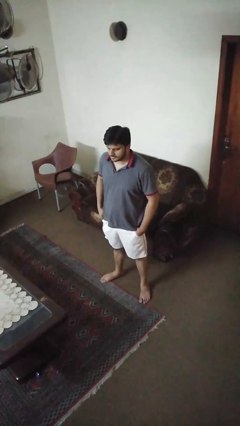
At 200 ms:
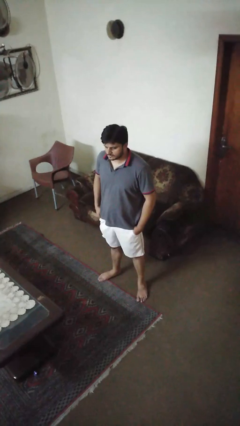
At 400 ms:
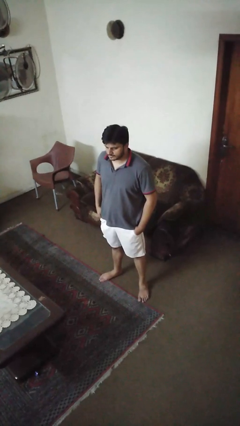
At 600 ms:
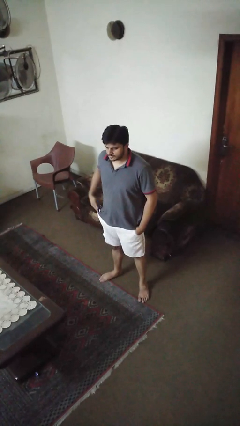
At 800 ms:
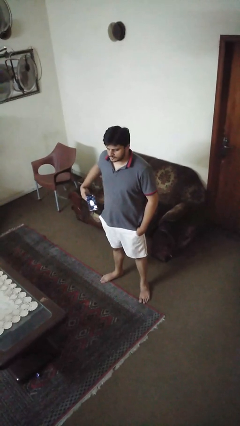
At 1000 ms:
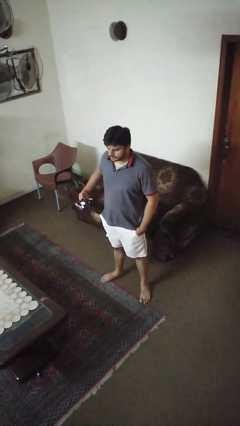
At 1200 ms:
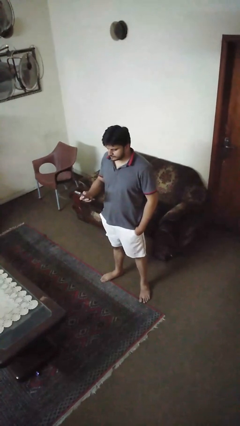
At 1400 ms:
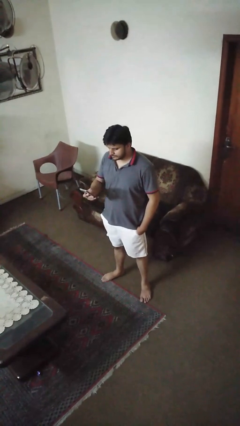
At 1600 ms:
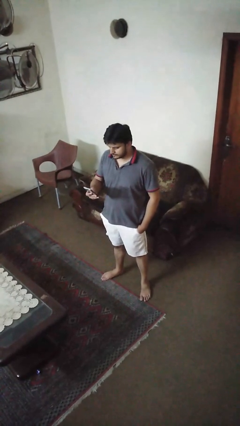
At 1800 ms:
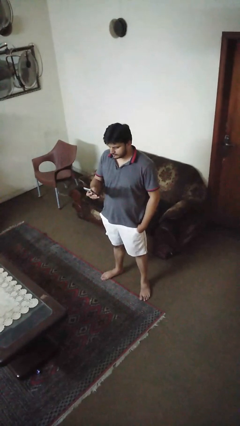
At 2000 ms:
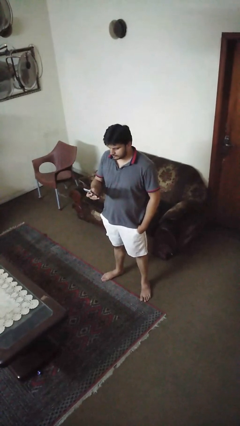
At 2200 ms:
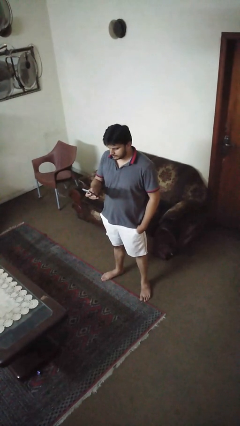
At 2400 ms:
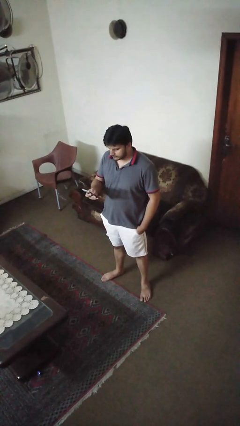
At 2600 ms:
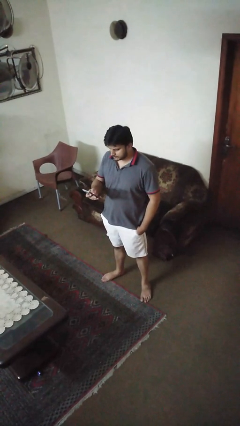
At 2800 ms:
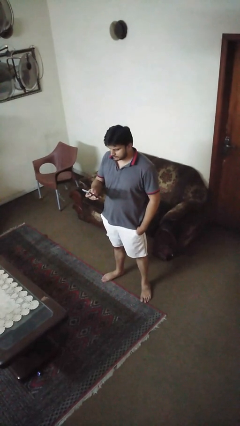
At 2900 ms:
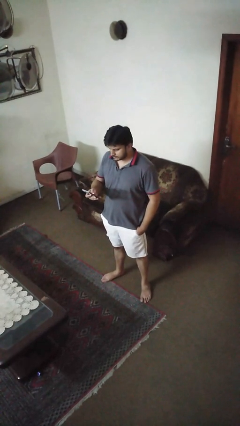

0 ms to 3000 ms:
person takes phone from pocket

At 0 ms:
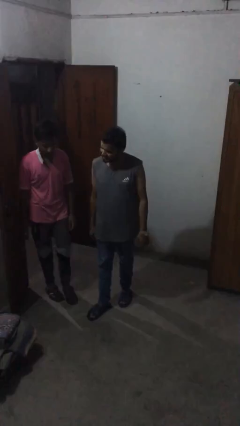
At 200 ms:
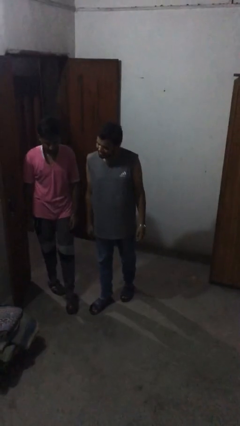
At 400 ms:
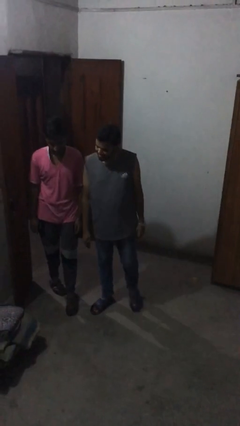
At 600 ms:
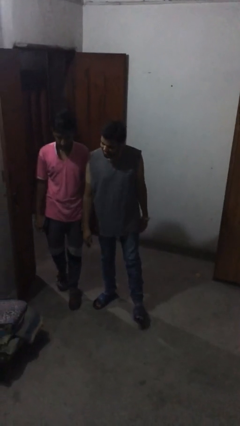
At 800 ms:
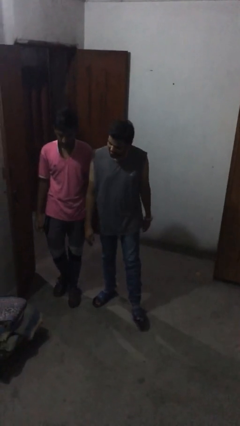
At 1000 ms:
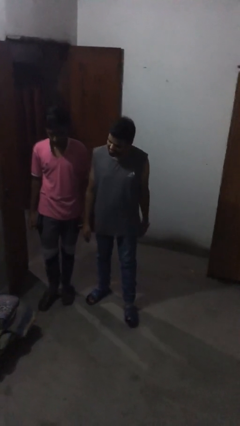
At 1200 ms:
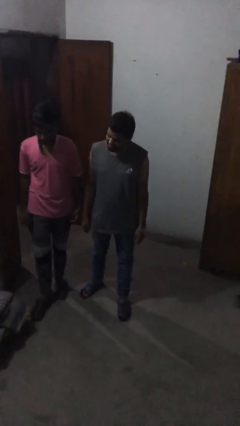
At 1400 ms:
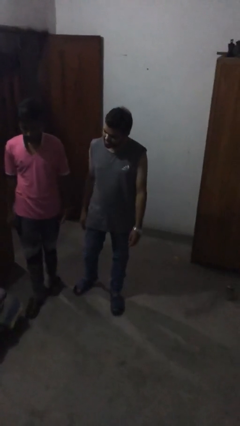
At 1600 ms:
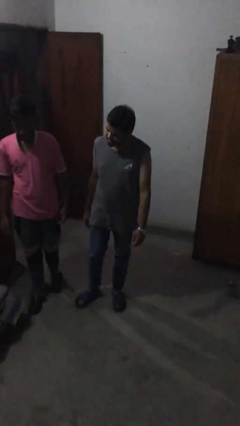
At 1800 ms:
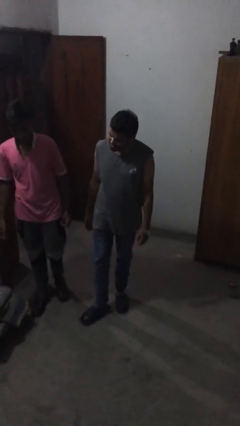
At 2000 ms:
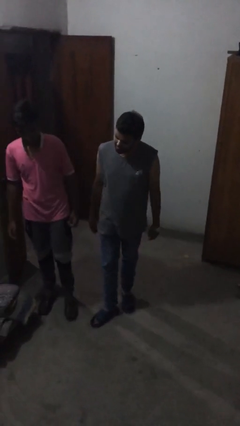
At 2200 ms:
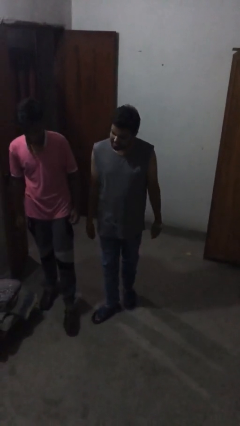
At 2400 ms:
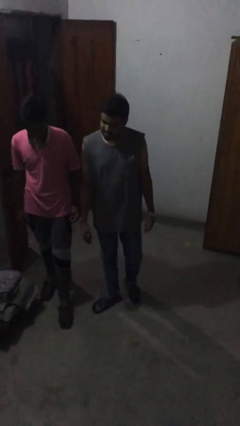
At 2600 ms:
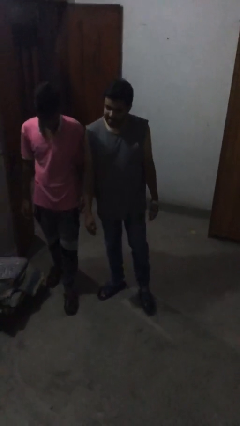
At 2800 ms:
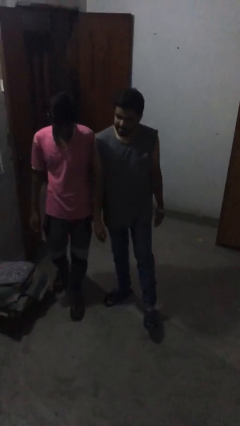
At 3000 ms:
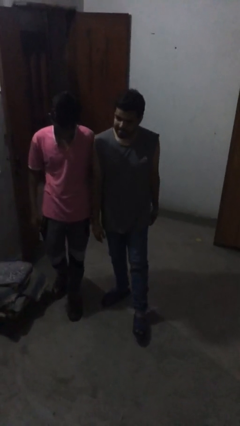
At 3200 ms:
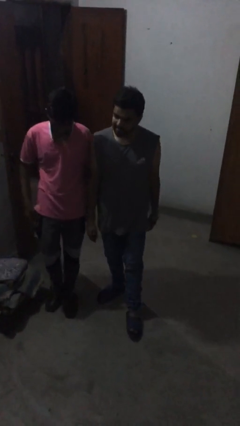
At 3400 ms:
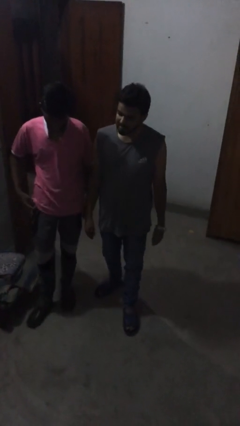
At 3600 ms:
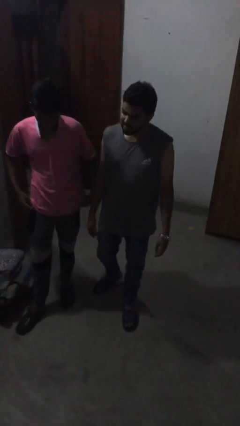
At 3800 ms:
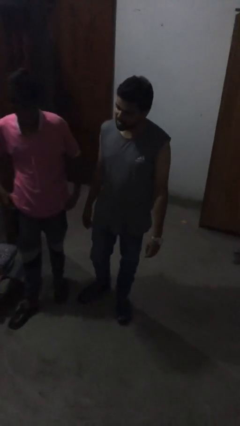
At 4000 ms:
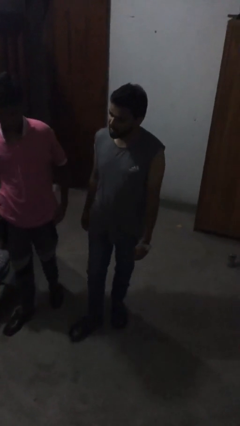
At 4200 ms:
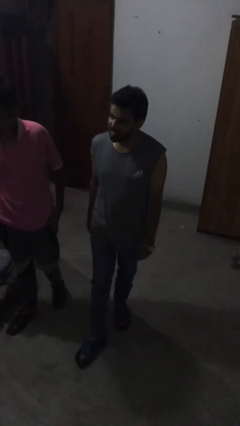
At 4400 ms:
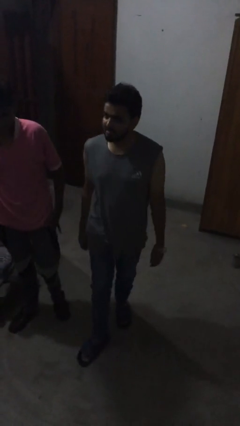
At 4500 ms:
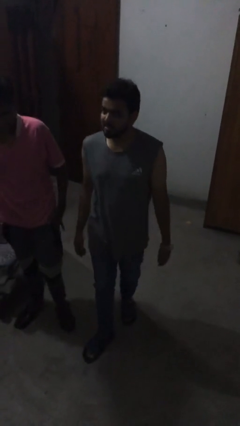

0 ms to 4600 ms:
person talks to person

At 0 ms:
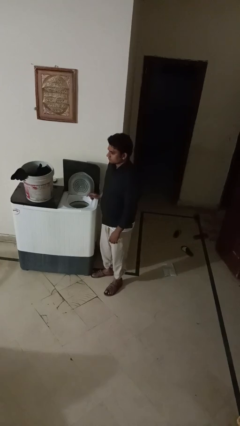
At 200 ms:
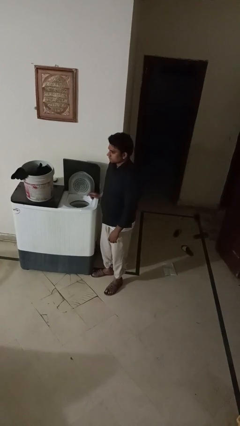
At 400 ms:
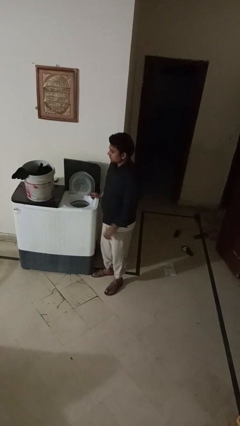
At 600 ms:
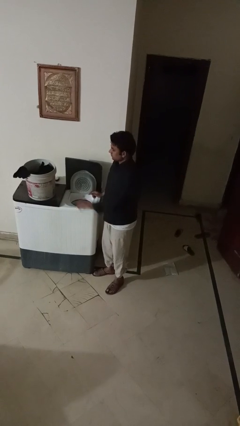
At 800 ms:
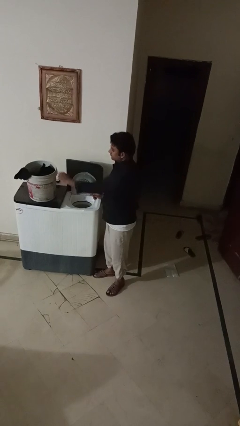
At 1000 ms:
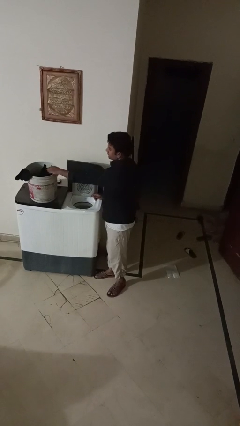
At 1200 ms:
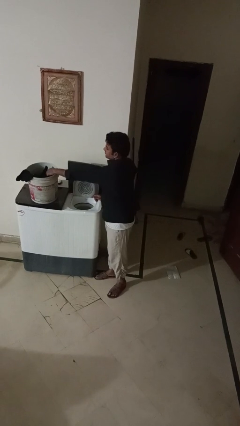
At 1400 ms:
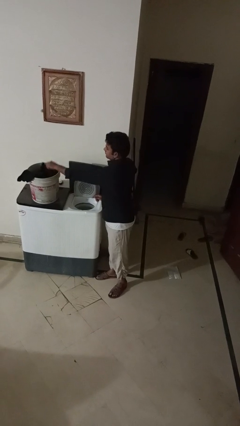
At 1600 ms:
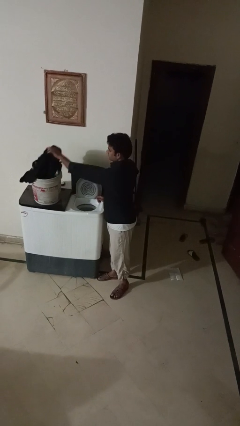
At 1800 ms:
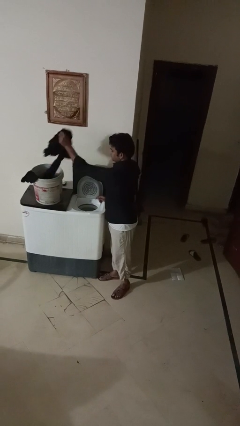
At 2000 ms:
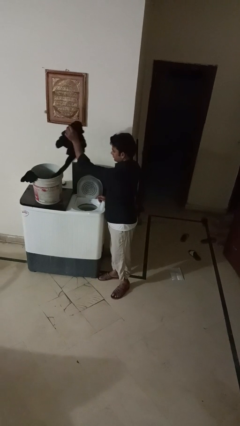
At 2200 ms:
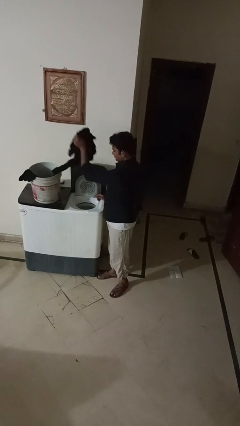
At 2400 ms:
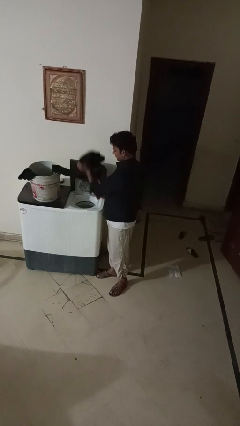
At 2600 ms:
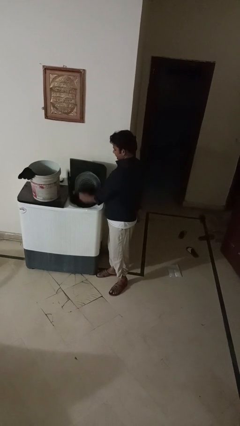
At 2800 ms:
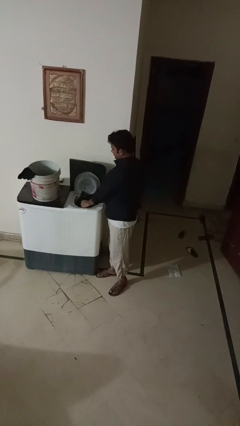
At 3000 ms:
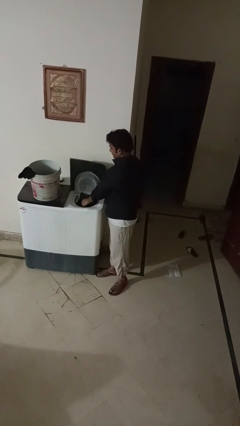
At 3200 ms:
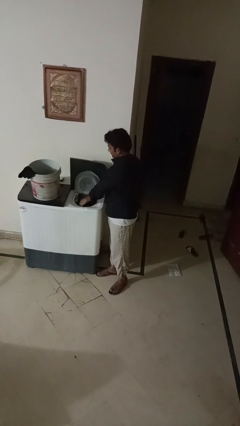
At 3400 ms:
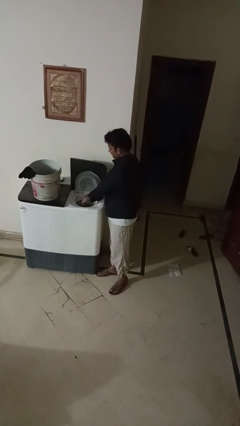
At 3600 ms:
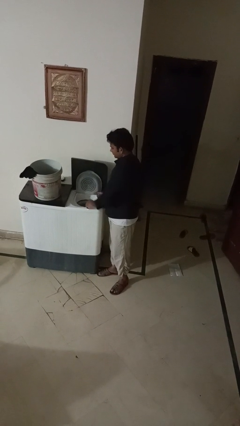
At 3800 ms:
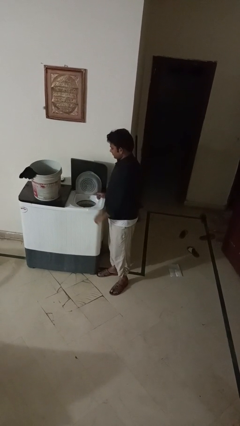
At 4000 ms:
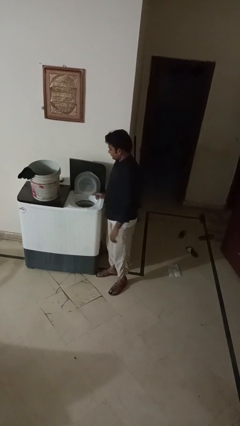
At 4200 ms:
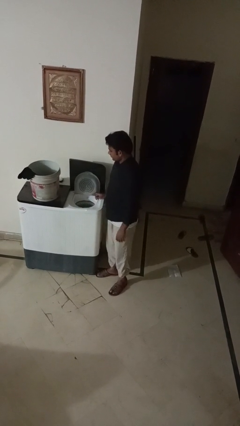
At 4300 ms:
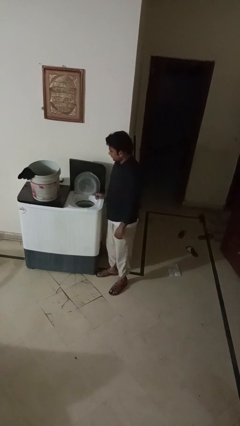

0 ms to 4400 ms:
person loads dryer

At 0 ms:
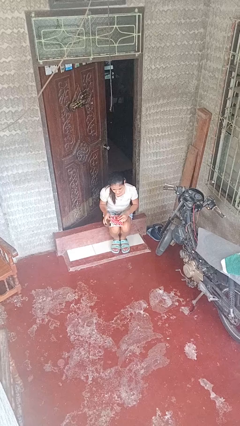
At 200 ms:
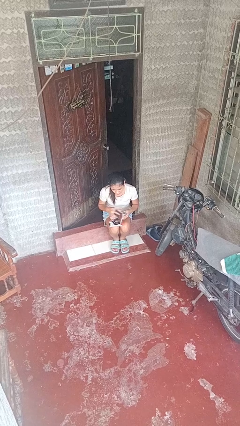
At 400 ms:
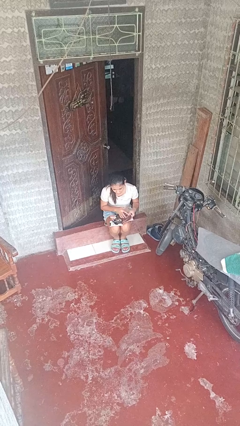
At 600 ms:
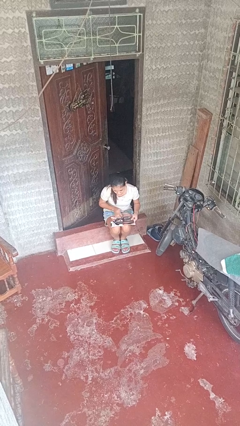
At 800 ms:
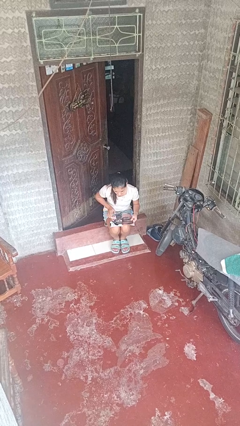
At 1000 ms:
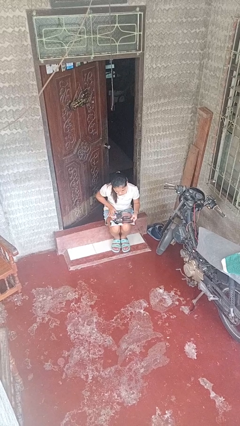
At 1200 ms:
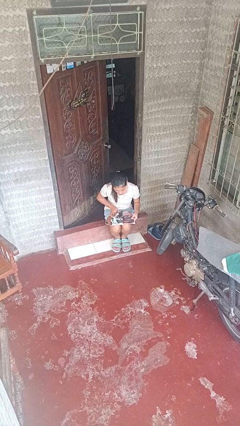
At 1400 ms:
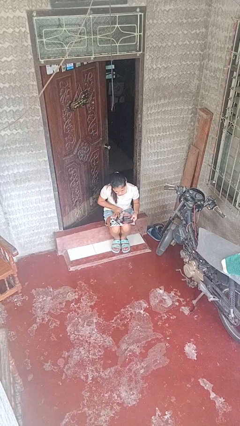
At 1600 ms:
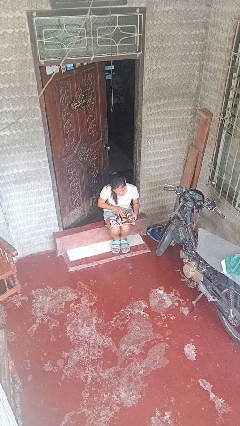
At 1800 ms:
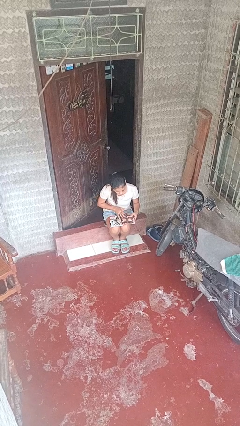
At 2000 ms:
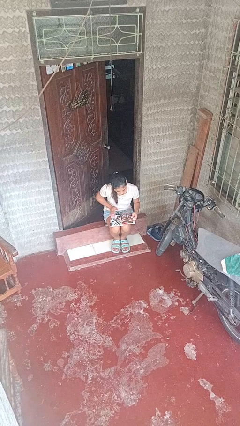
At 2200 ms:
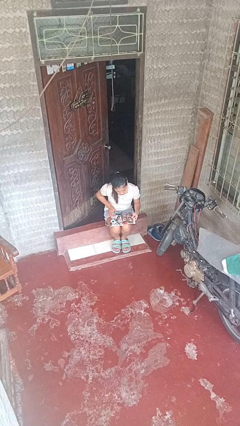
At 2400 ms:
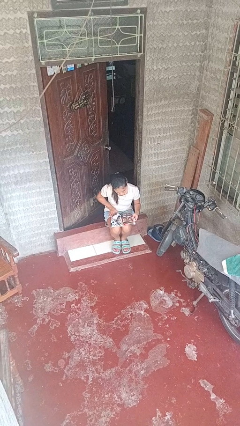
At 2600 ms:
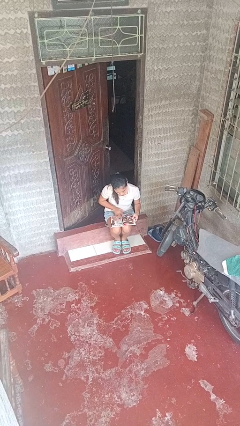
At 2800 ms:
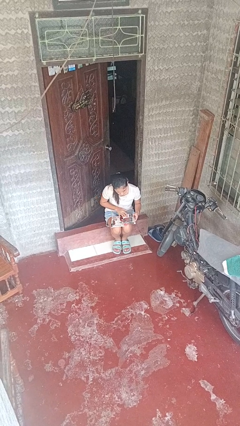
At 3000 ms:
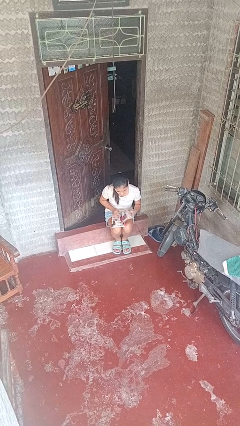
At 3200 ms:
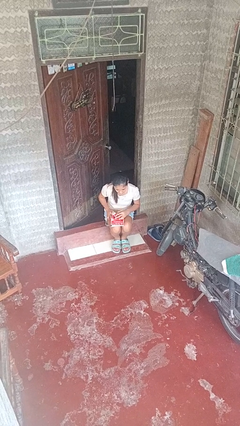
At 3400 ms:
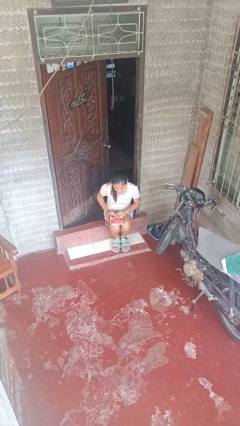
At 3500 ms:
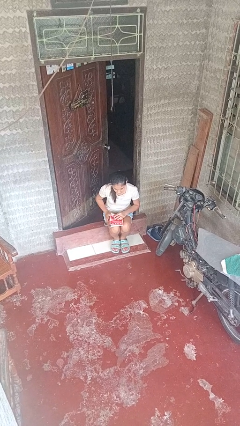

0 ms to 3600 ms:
person reads magazine

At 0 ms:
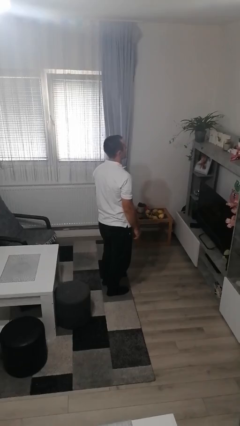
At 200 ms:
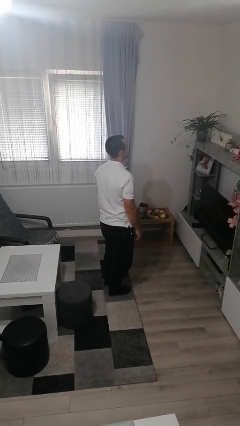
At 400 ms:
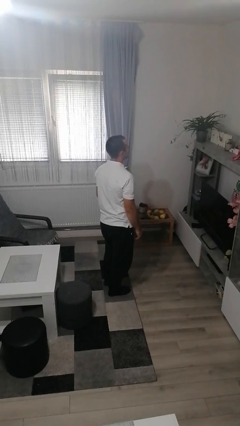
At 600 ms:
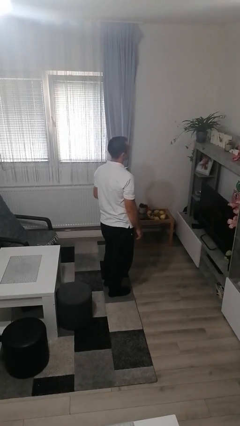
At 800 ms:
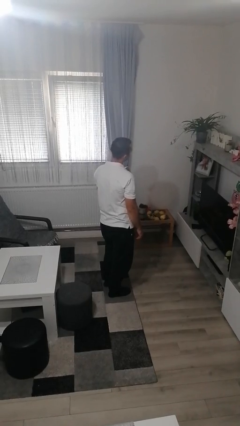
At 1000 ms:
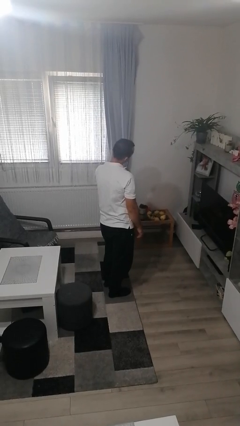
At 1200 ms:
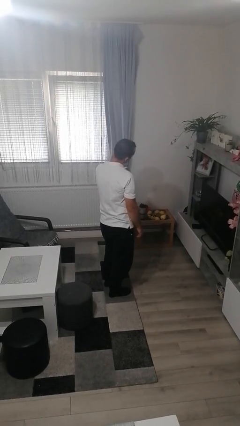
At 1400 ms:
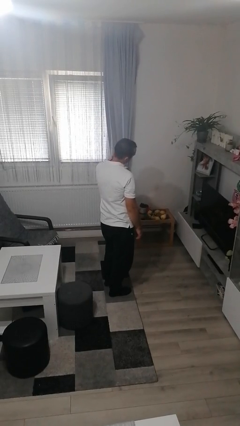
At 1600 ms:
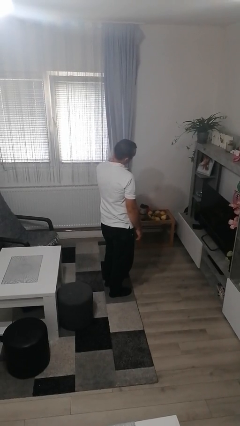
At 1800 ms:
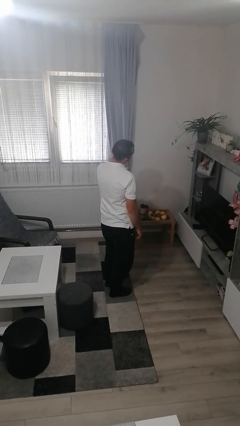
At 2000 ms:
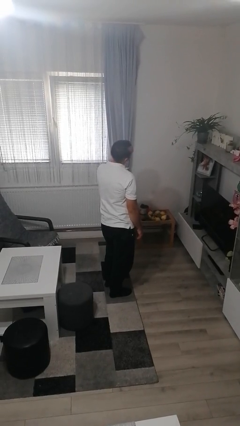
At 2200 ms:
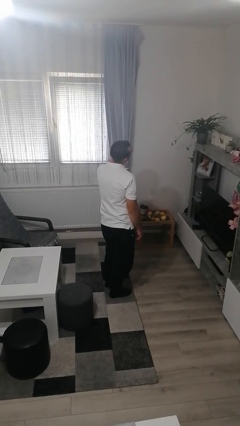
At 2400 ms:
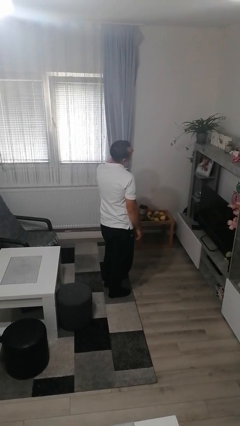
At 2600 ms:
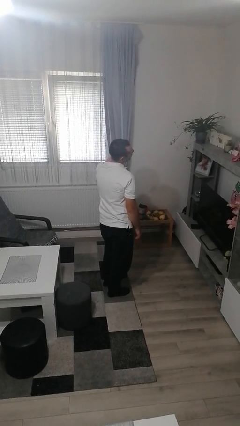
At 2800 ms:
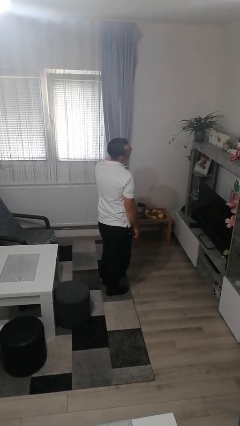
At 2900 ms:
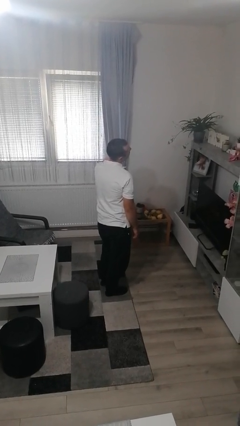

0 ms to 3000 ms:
person rubs neck
